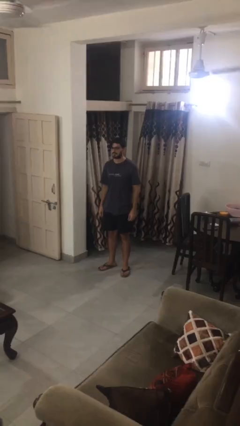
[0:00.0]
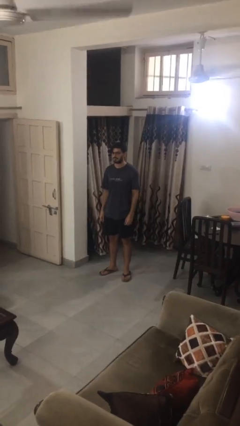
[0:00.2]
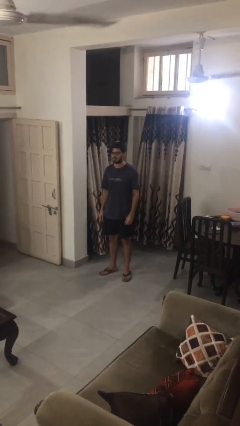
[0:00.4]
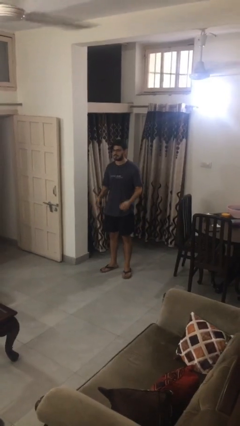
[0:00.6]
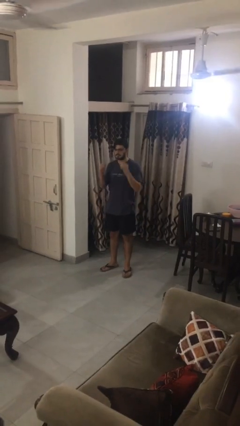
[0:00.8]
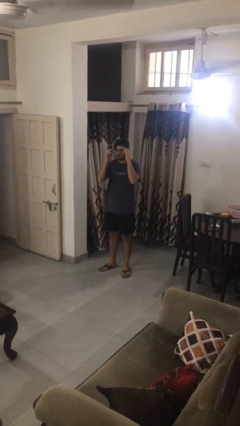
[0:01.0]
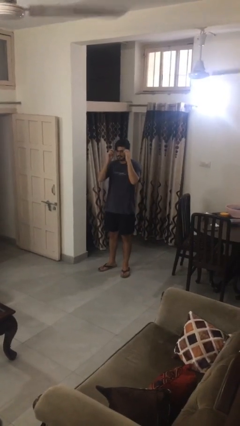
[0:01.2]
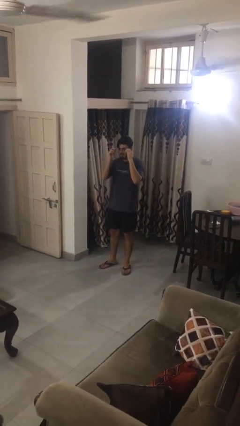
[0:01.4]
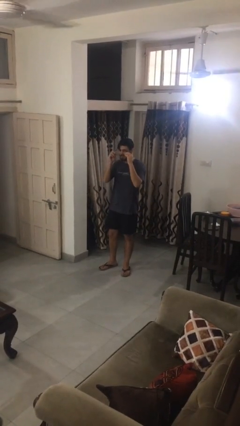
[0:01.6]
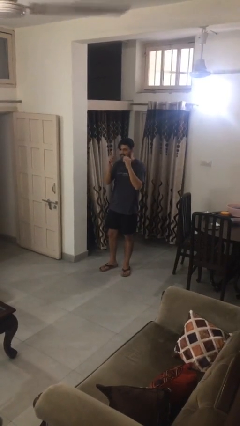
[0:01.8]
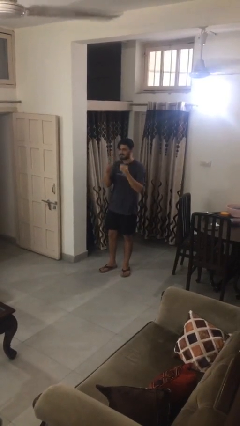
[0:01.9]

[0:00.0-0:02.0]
person takes off glasses

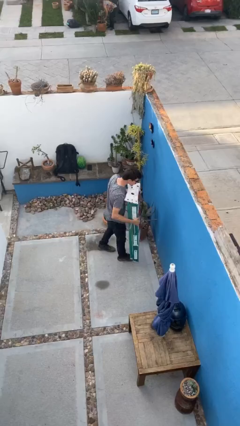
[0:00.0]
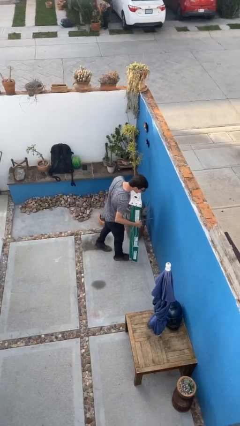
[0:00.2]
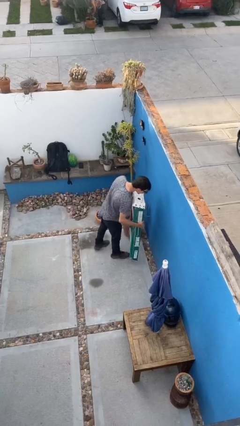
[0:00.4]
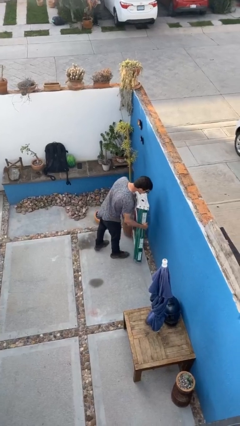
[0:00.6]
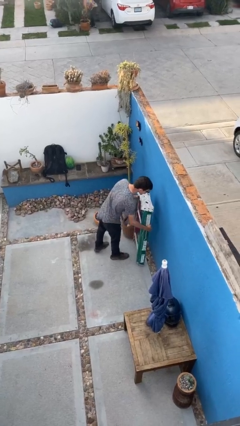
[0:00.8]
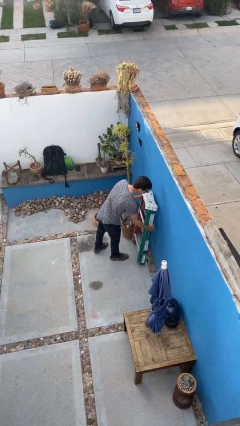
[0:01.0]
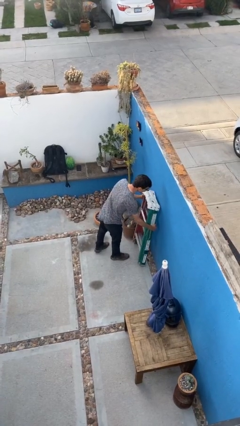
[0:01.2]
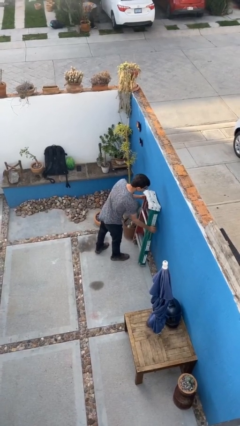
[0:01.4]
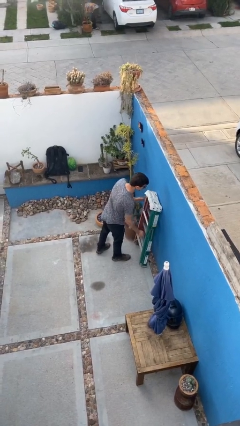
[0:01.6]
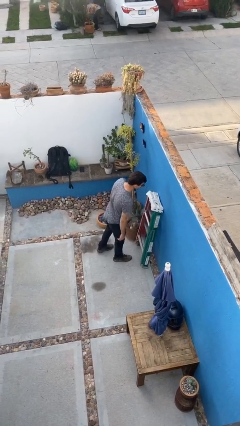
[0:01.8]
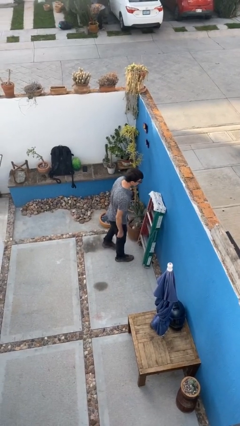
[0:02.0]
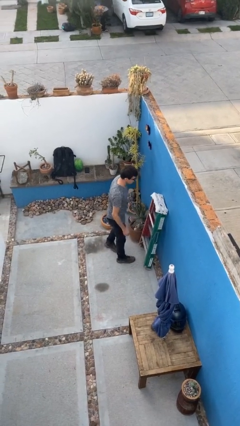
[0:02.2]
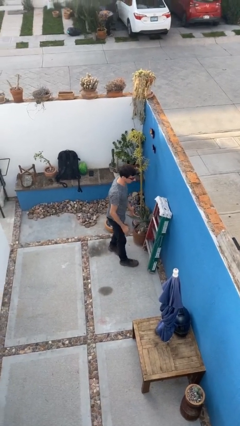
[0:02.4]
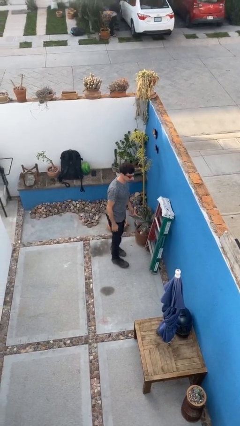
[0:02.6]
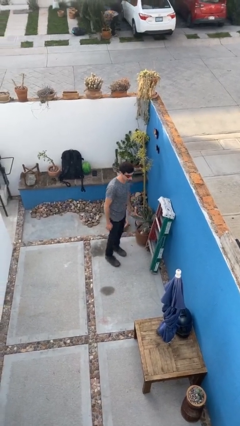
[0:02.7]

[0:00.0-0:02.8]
person puts down object on floor

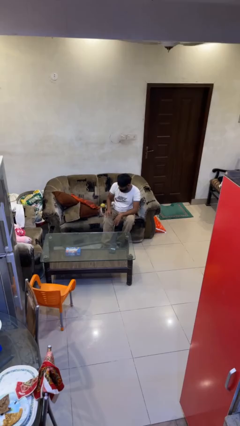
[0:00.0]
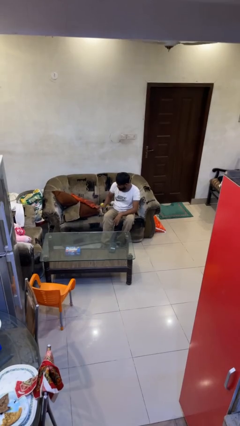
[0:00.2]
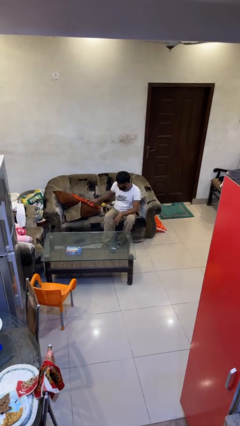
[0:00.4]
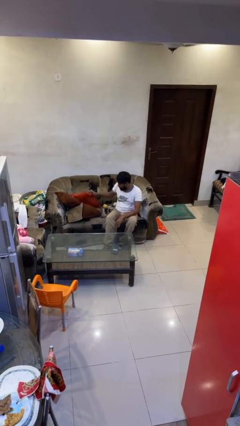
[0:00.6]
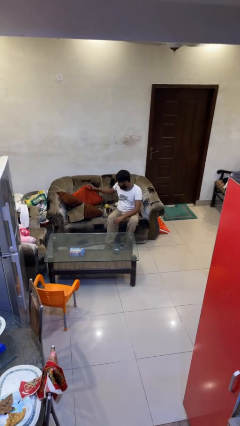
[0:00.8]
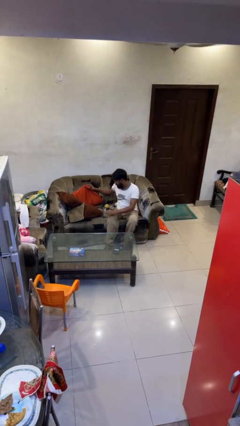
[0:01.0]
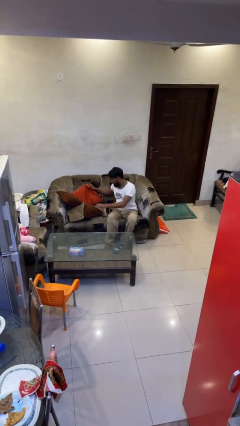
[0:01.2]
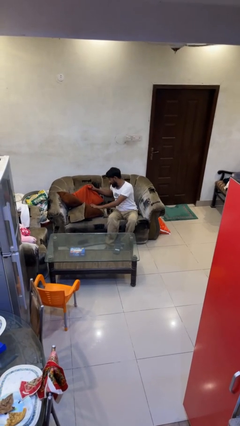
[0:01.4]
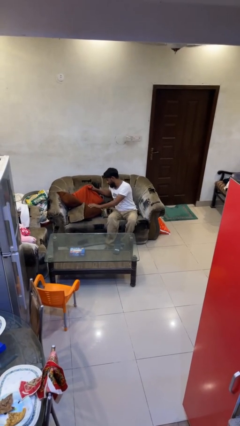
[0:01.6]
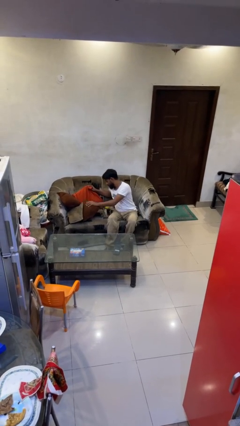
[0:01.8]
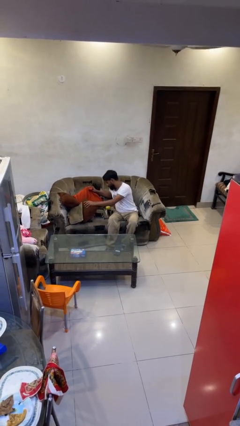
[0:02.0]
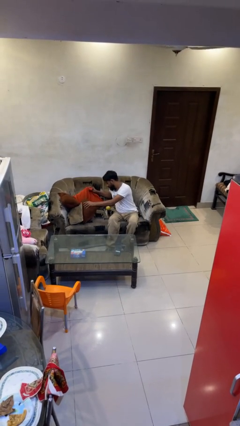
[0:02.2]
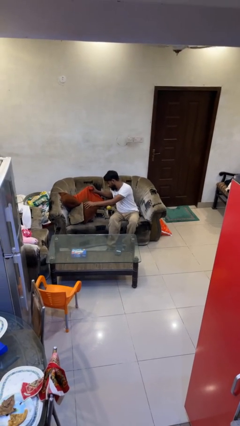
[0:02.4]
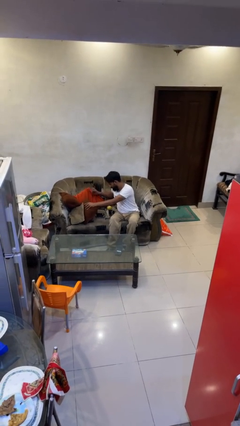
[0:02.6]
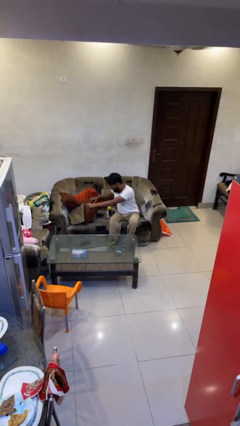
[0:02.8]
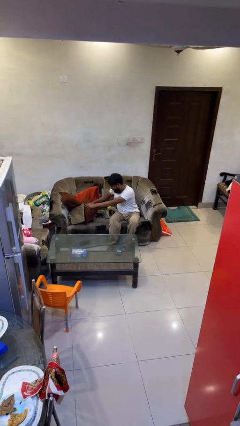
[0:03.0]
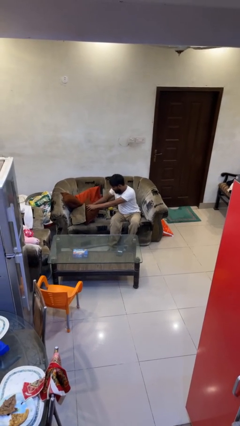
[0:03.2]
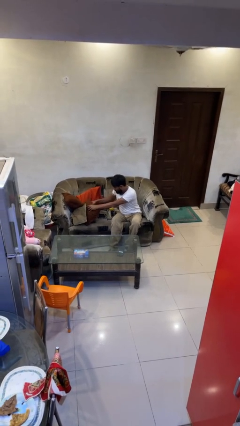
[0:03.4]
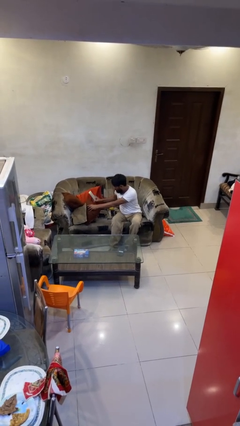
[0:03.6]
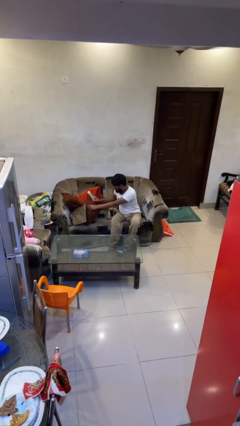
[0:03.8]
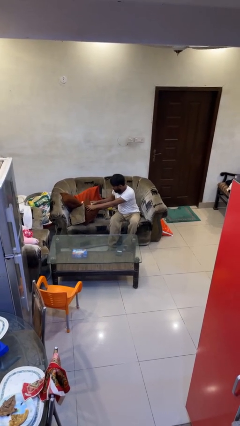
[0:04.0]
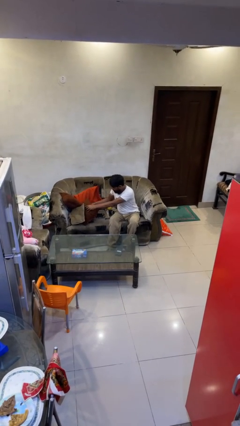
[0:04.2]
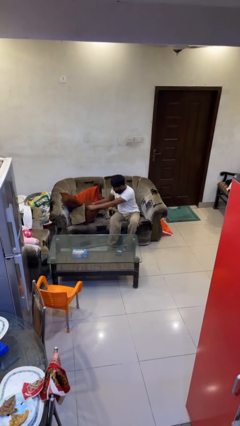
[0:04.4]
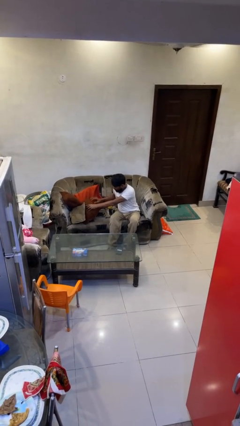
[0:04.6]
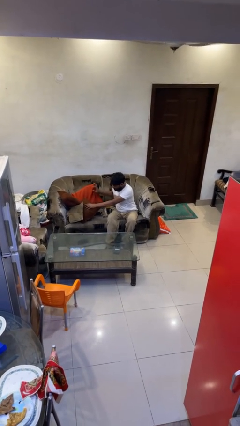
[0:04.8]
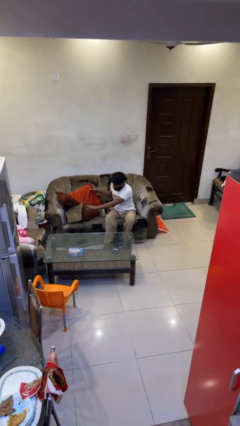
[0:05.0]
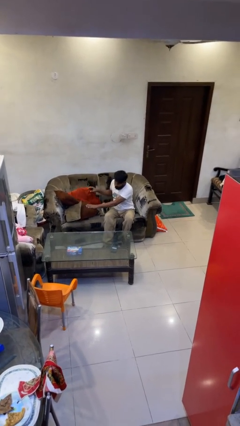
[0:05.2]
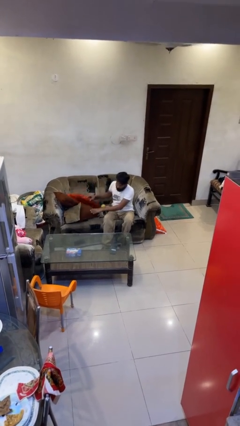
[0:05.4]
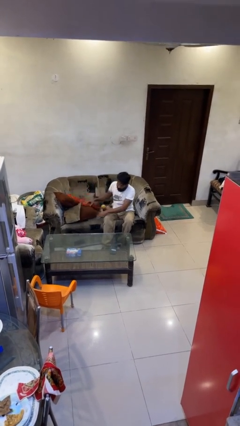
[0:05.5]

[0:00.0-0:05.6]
person searches in couch

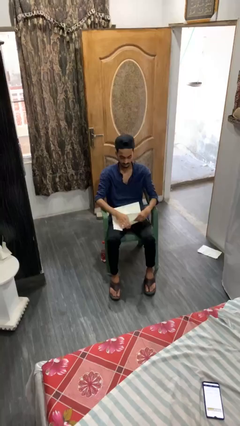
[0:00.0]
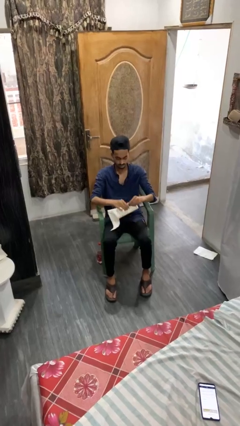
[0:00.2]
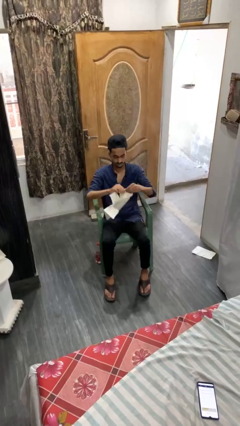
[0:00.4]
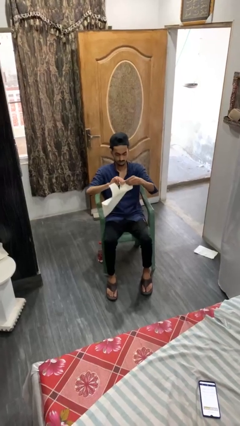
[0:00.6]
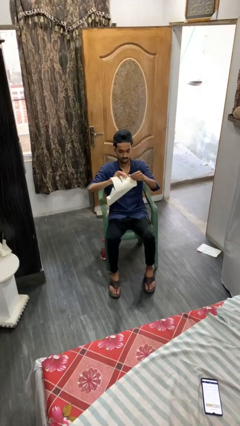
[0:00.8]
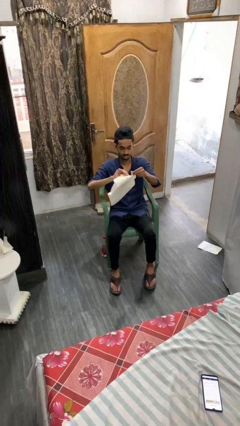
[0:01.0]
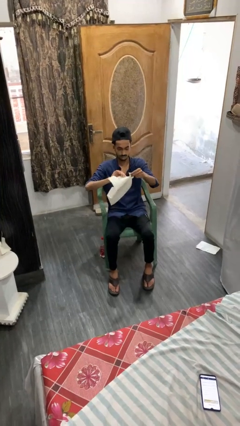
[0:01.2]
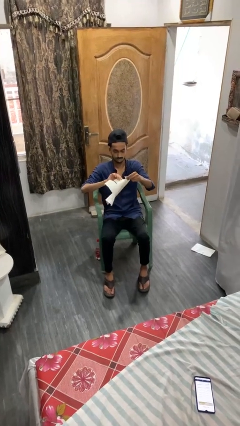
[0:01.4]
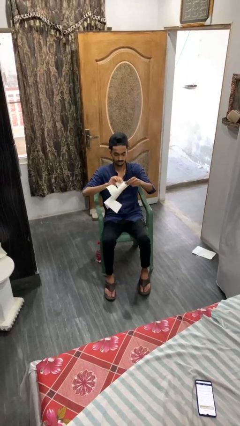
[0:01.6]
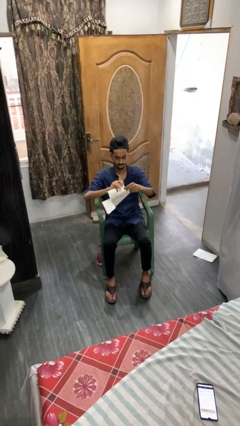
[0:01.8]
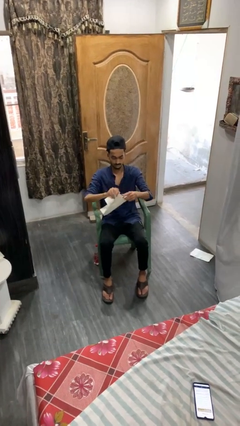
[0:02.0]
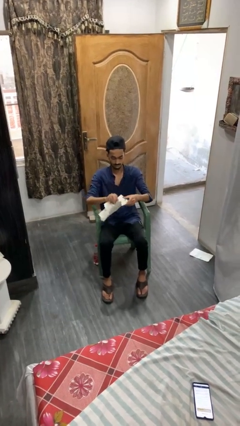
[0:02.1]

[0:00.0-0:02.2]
person tears paper

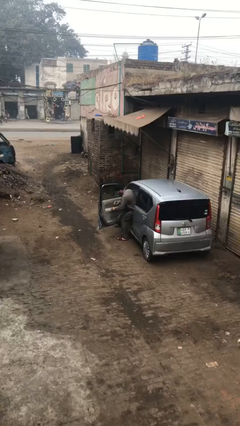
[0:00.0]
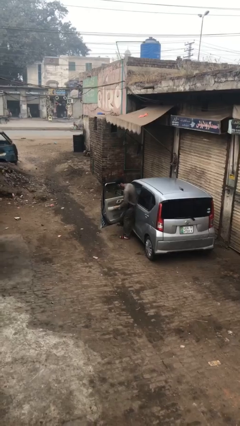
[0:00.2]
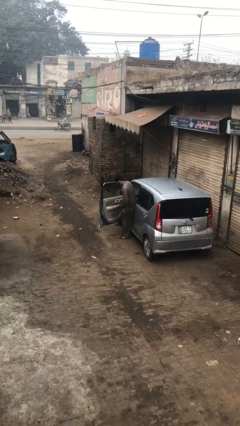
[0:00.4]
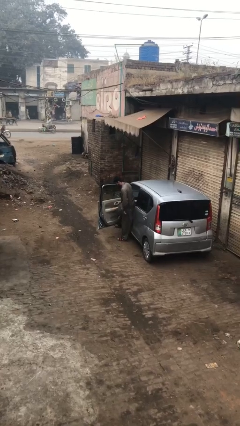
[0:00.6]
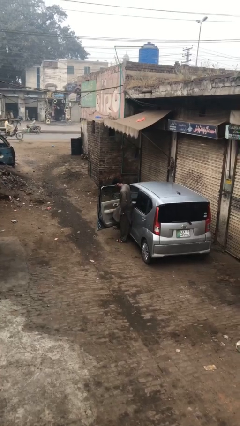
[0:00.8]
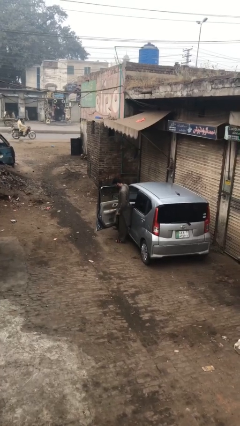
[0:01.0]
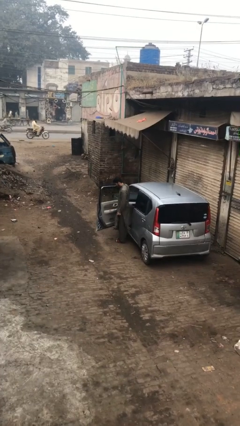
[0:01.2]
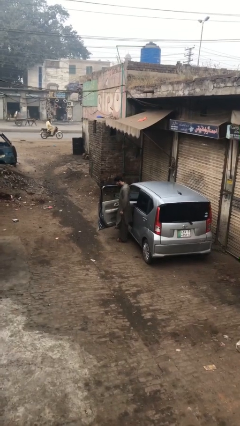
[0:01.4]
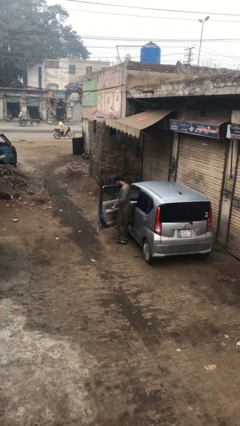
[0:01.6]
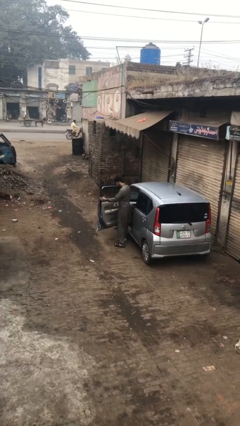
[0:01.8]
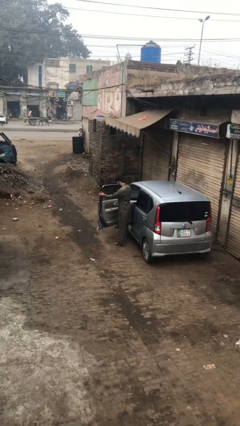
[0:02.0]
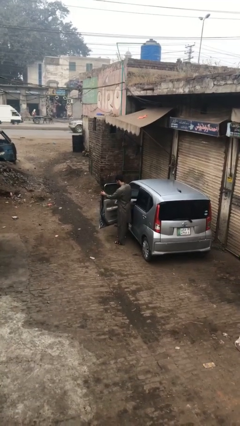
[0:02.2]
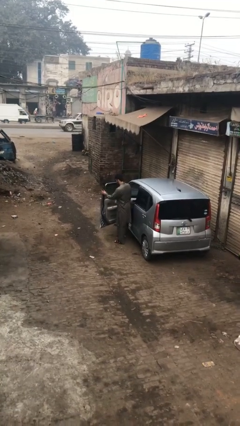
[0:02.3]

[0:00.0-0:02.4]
person exits car

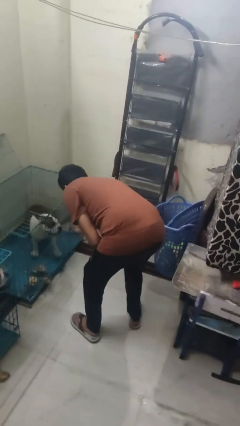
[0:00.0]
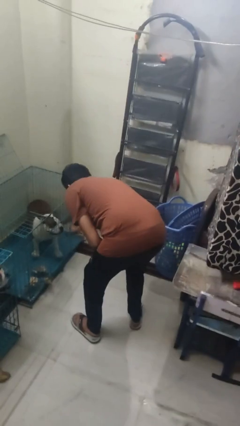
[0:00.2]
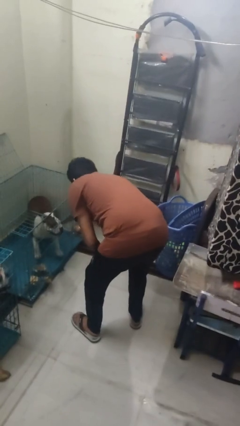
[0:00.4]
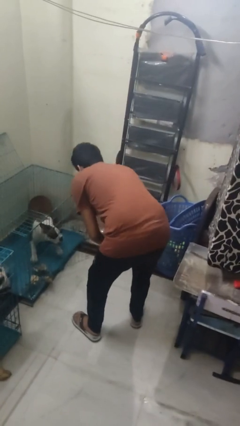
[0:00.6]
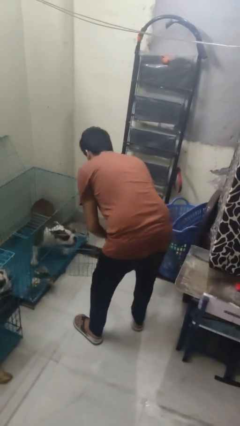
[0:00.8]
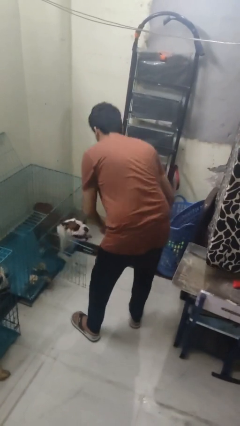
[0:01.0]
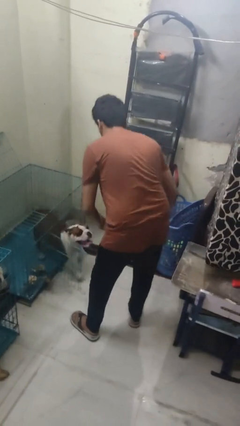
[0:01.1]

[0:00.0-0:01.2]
person uncrates dog

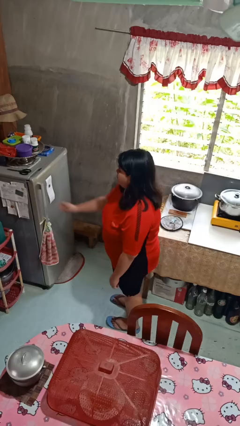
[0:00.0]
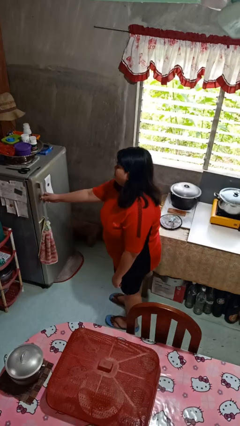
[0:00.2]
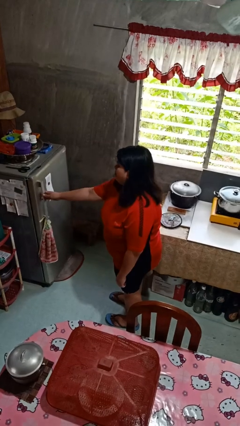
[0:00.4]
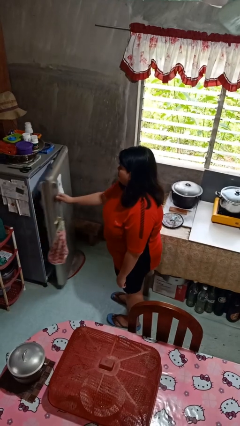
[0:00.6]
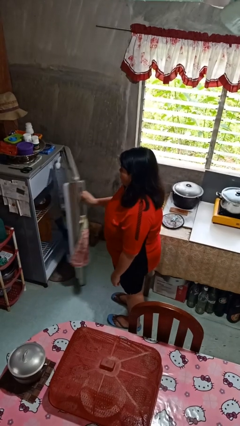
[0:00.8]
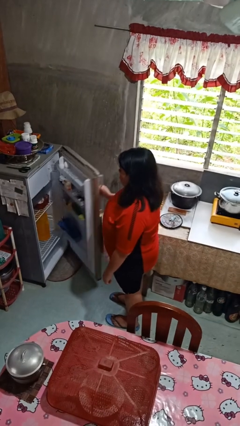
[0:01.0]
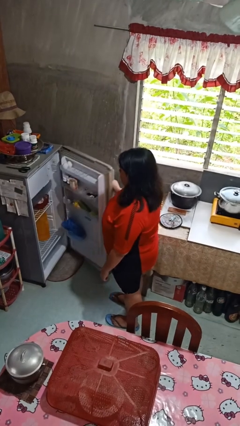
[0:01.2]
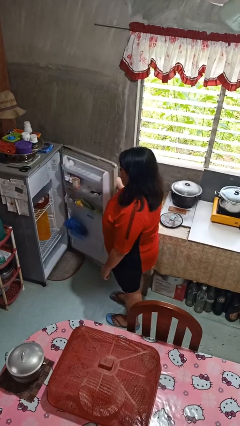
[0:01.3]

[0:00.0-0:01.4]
person opens refrigerator
